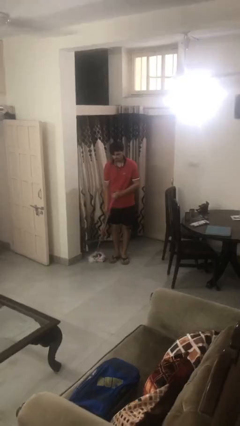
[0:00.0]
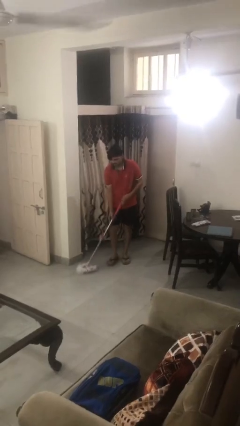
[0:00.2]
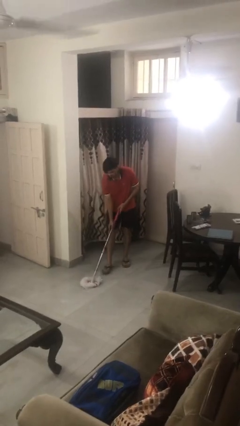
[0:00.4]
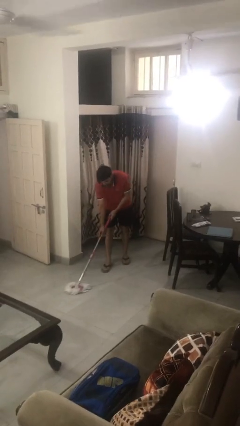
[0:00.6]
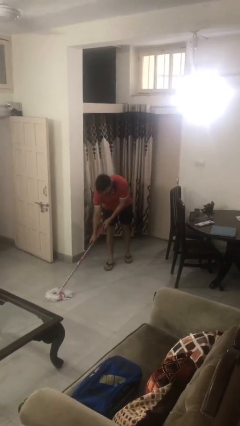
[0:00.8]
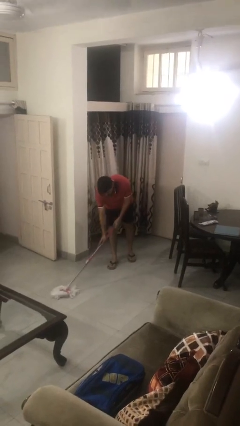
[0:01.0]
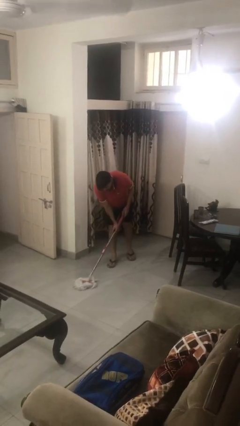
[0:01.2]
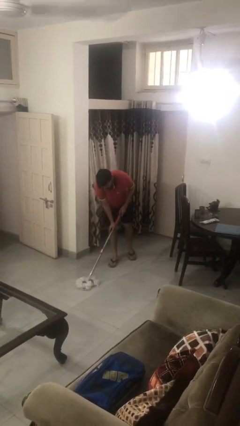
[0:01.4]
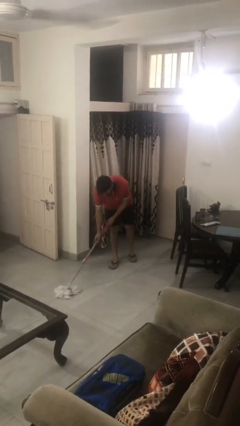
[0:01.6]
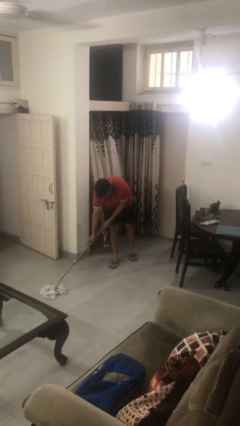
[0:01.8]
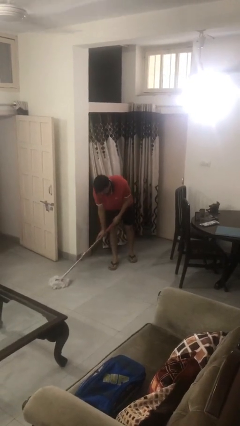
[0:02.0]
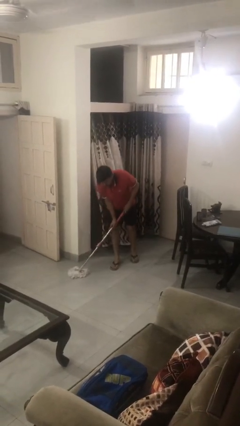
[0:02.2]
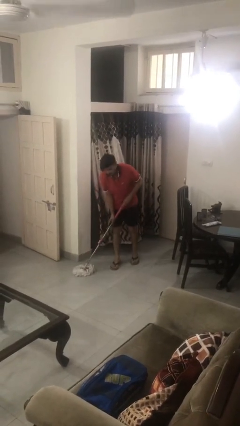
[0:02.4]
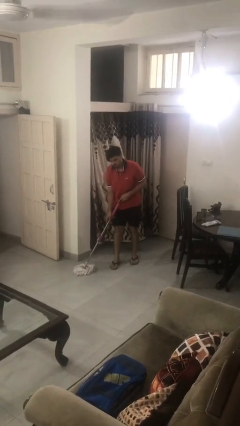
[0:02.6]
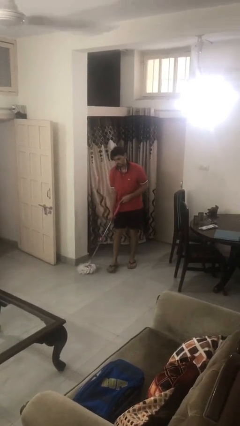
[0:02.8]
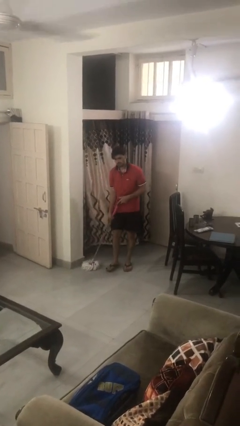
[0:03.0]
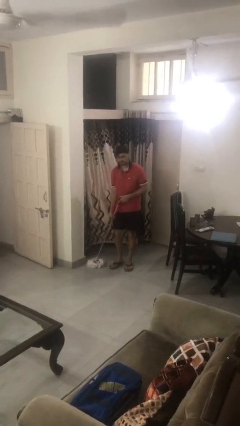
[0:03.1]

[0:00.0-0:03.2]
person mops

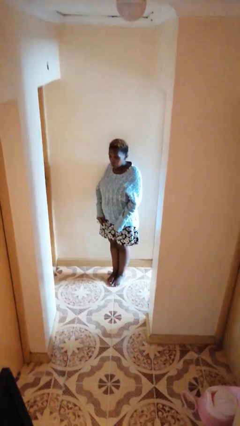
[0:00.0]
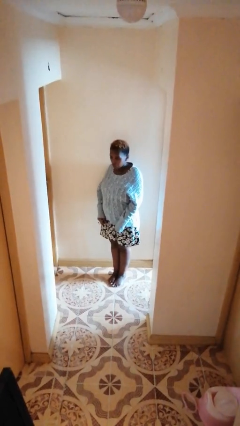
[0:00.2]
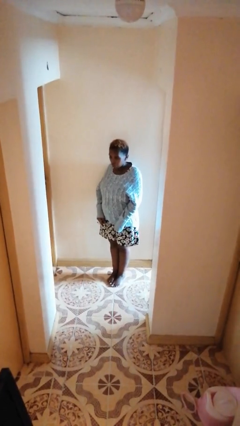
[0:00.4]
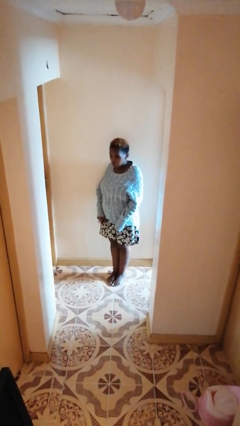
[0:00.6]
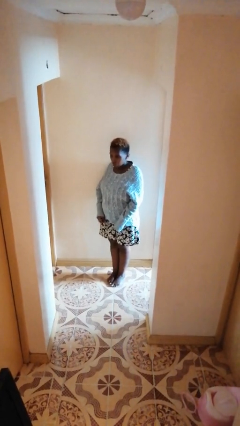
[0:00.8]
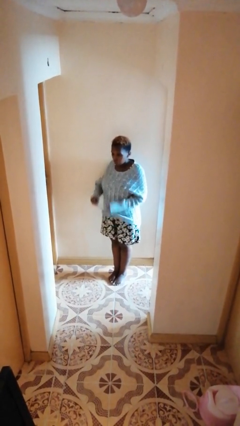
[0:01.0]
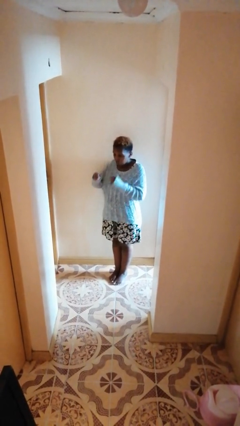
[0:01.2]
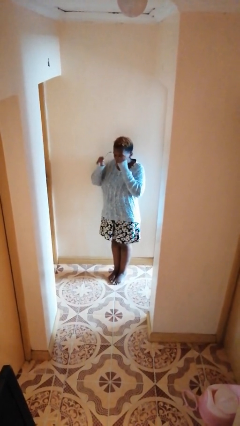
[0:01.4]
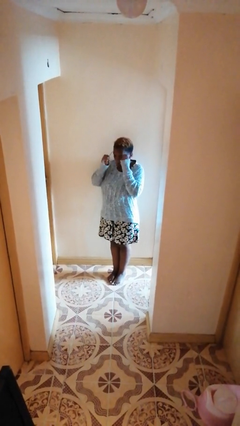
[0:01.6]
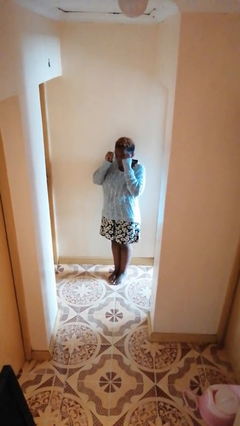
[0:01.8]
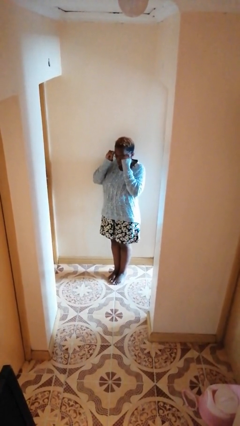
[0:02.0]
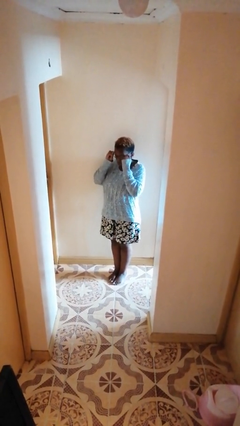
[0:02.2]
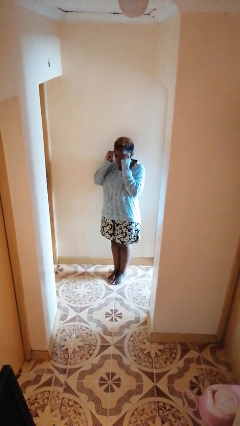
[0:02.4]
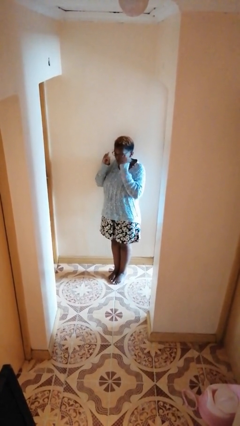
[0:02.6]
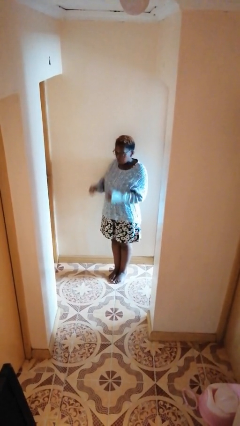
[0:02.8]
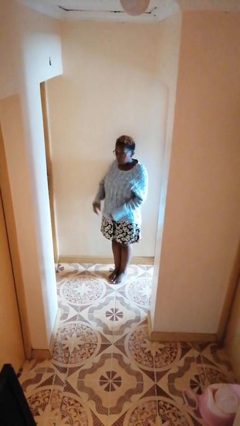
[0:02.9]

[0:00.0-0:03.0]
person puts on glasses

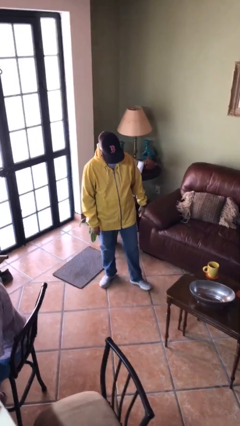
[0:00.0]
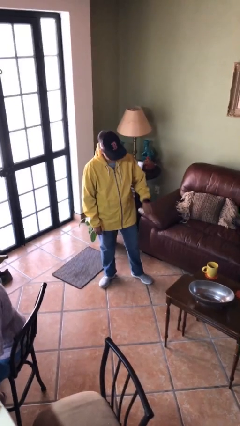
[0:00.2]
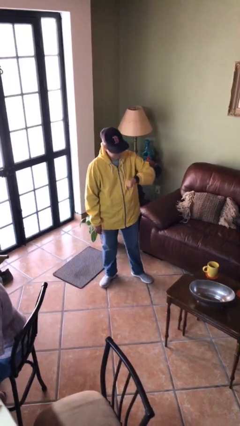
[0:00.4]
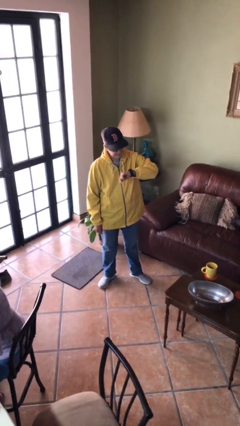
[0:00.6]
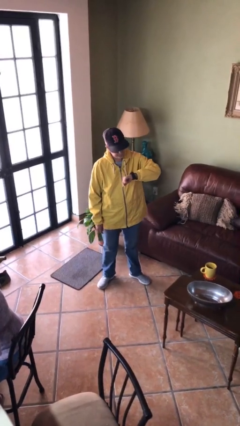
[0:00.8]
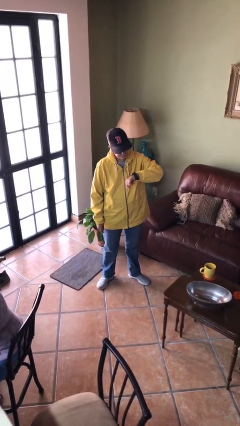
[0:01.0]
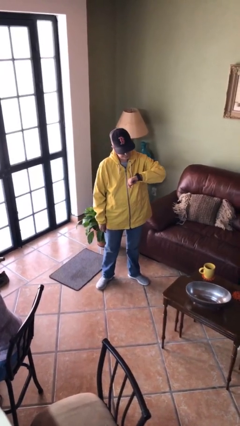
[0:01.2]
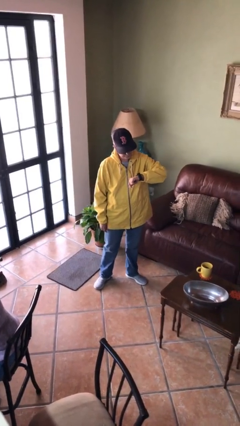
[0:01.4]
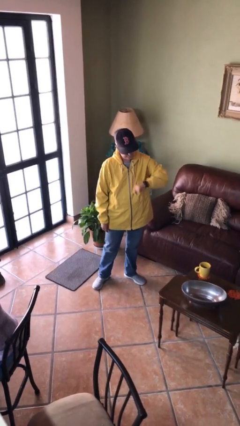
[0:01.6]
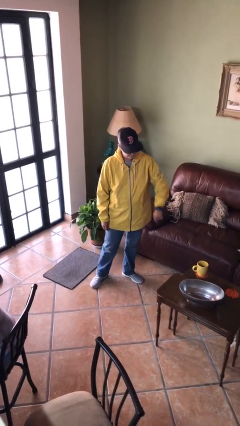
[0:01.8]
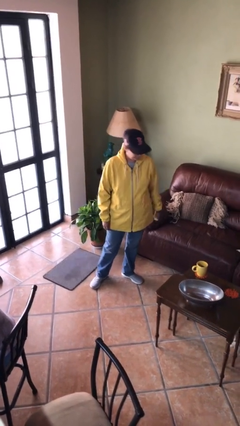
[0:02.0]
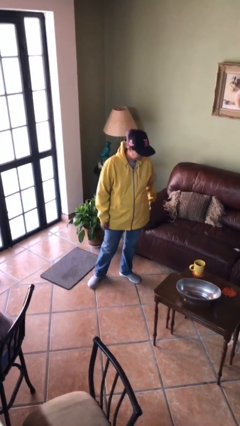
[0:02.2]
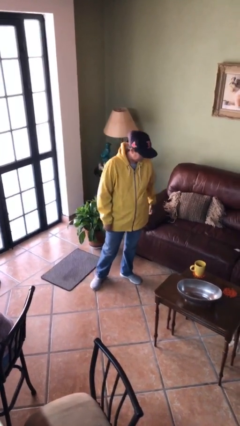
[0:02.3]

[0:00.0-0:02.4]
person looks at wristwatch

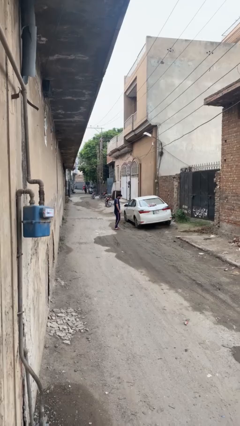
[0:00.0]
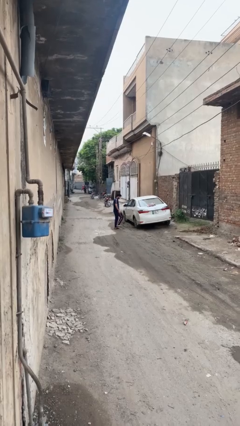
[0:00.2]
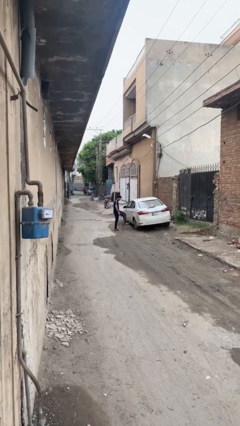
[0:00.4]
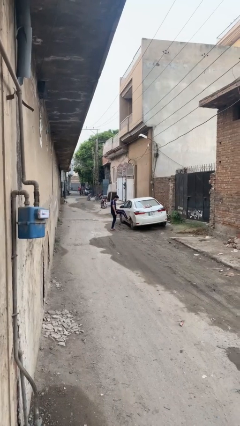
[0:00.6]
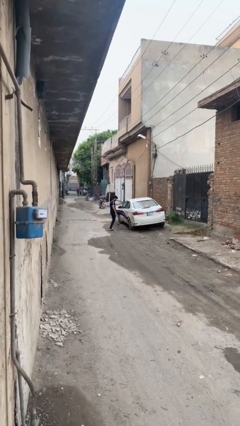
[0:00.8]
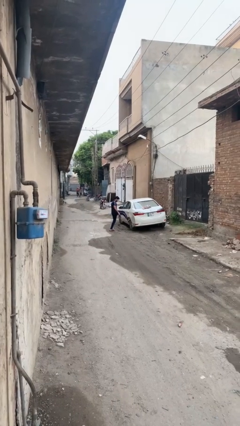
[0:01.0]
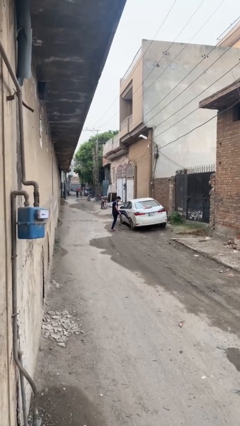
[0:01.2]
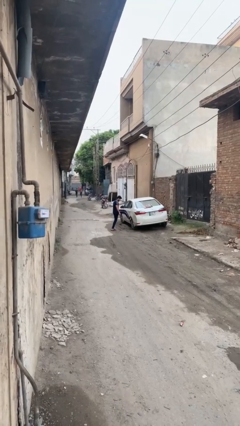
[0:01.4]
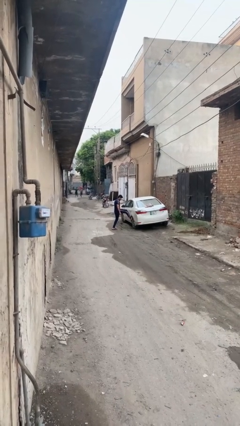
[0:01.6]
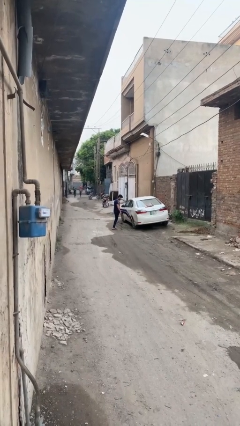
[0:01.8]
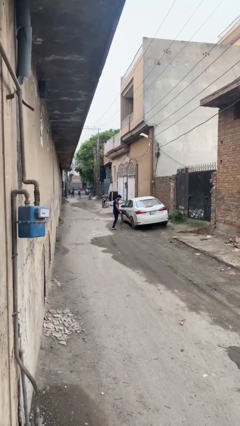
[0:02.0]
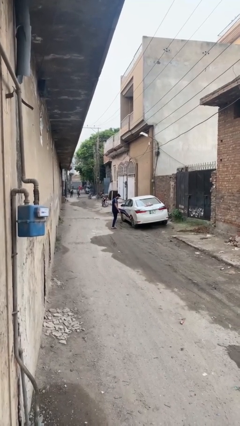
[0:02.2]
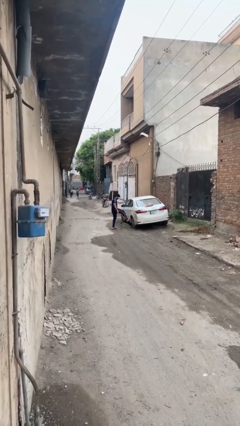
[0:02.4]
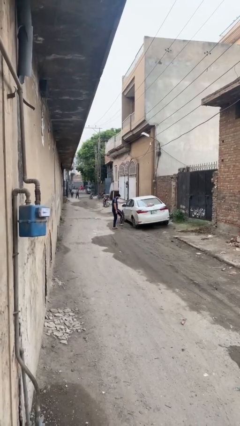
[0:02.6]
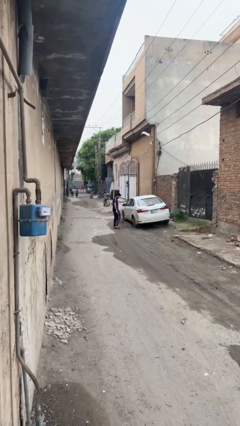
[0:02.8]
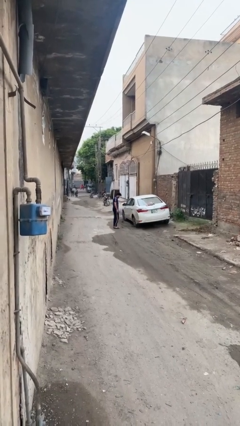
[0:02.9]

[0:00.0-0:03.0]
person kicks car tires

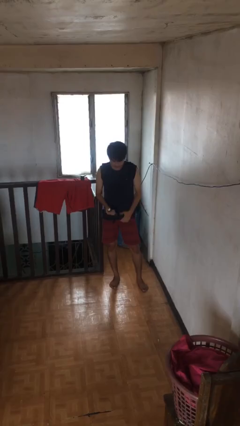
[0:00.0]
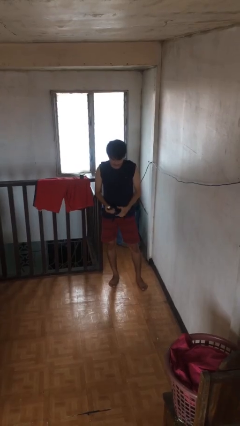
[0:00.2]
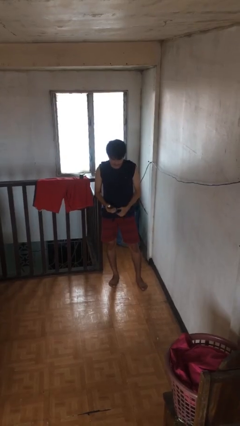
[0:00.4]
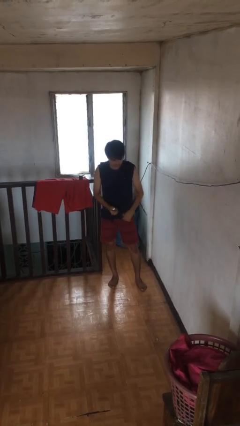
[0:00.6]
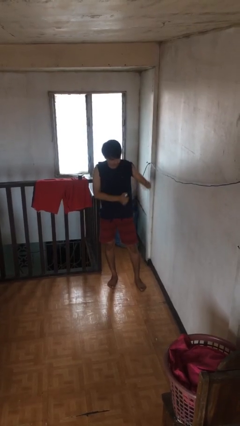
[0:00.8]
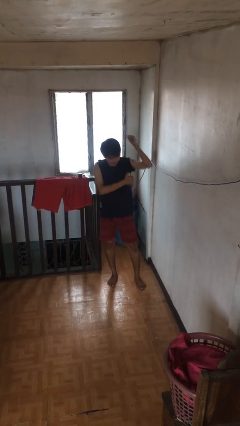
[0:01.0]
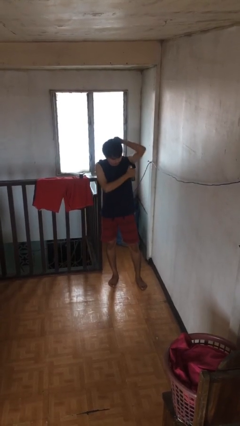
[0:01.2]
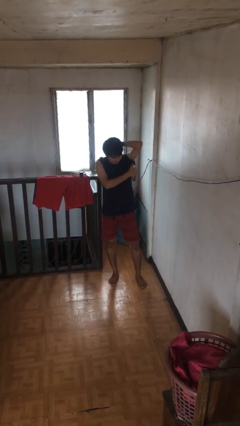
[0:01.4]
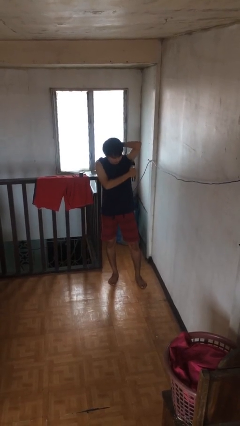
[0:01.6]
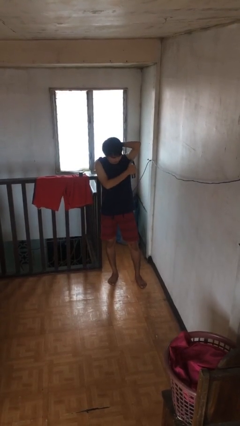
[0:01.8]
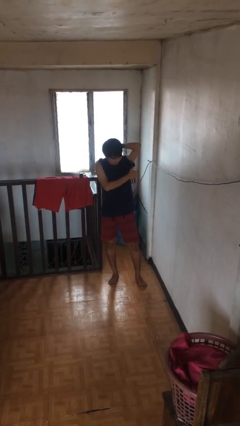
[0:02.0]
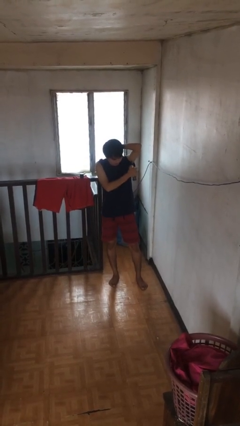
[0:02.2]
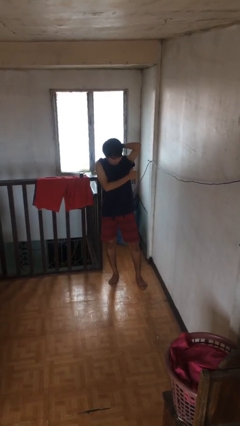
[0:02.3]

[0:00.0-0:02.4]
person applies deodorant

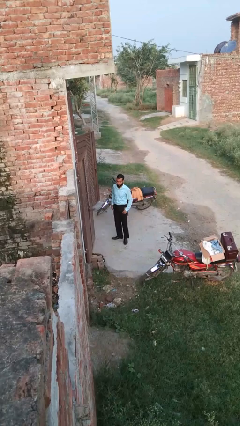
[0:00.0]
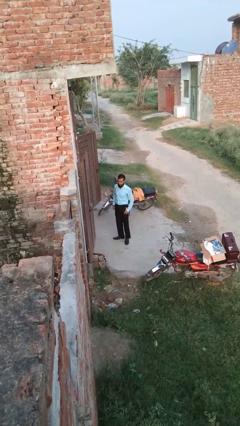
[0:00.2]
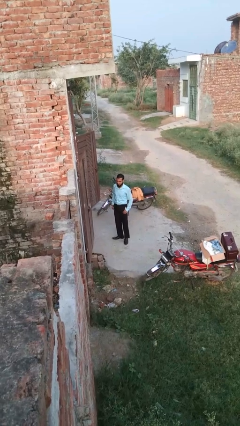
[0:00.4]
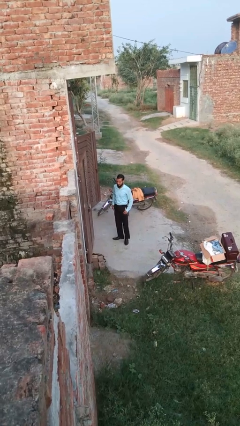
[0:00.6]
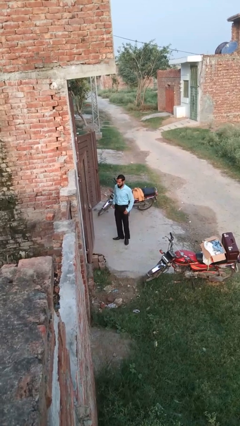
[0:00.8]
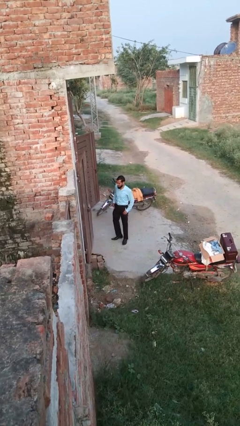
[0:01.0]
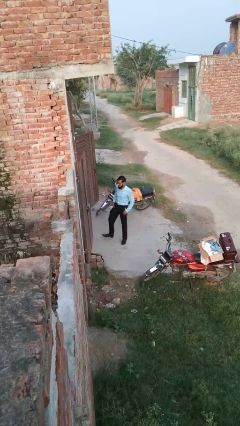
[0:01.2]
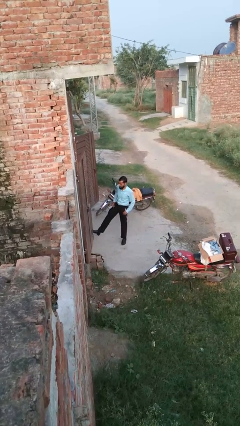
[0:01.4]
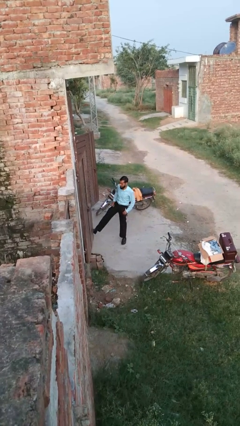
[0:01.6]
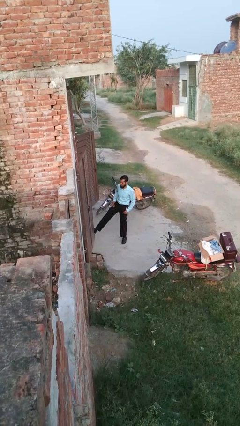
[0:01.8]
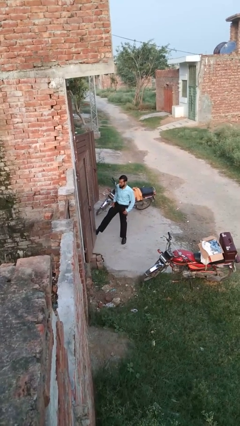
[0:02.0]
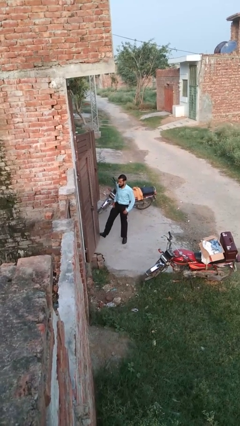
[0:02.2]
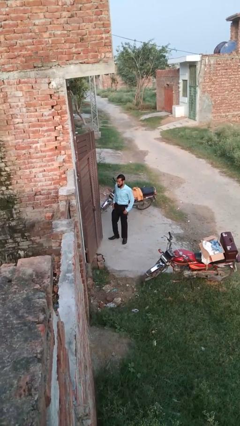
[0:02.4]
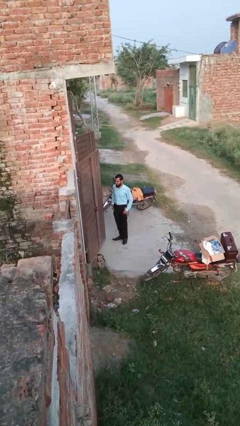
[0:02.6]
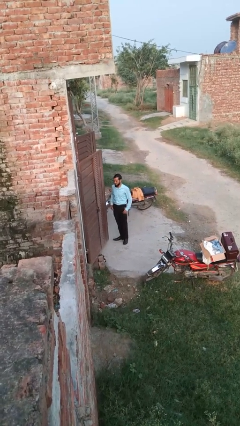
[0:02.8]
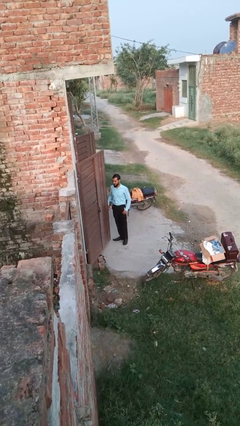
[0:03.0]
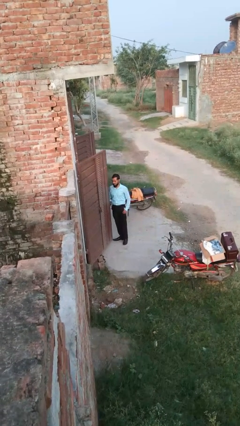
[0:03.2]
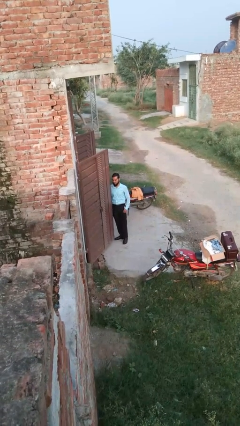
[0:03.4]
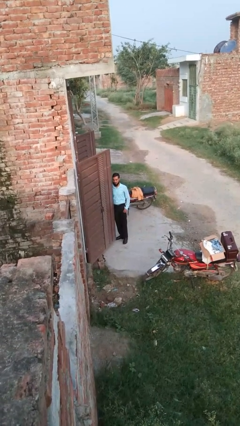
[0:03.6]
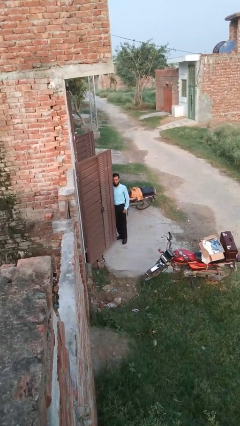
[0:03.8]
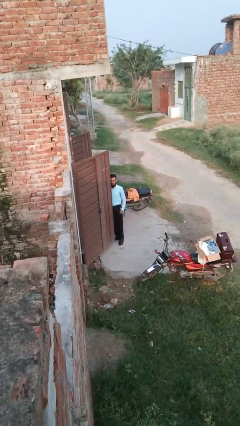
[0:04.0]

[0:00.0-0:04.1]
person opens facility door
